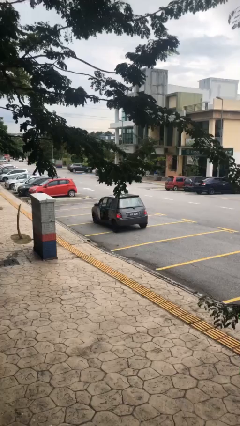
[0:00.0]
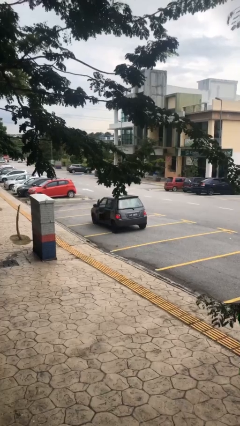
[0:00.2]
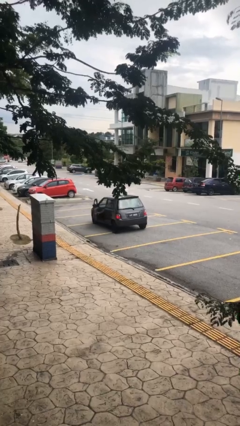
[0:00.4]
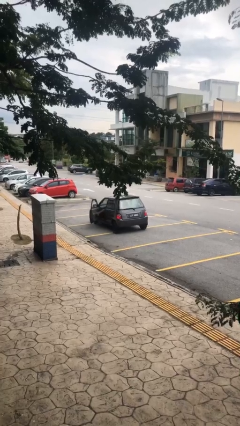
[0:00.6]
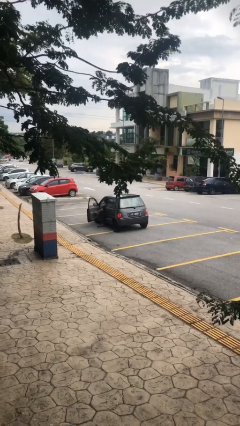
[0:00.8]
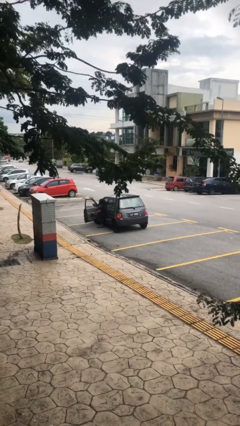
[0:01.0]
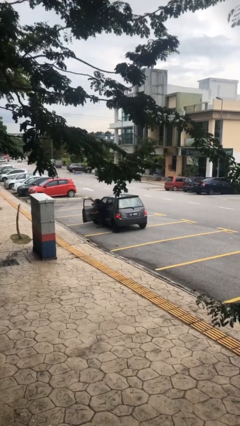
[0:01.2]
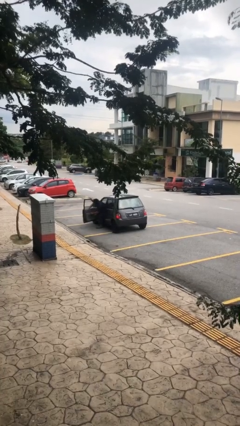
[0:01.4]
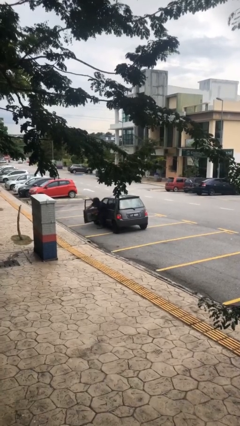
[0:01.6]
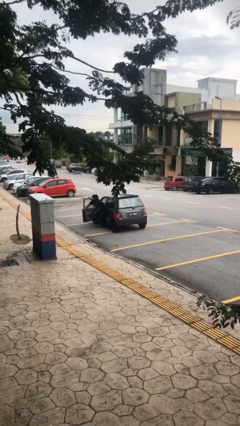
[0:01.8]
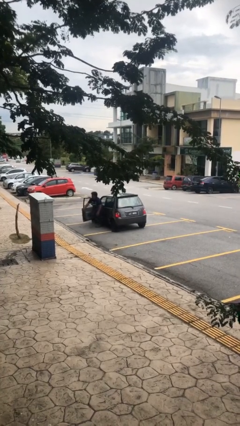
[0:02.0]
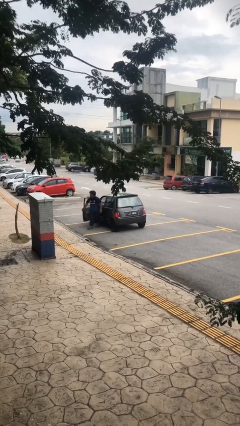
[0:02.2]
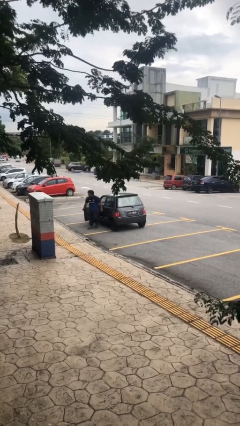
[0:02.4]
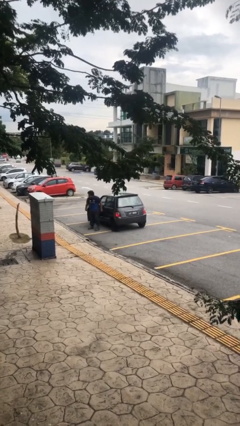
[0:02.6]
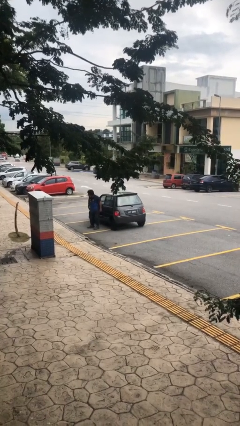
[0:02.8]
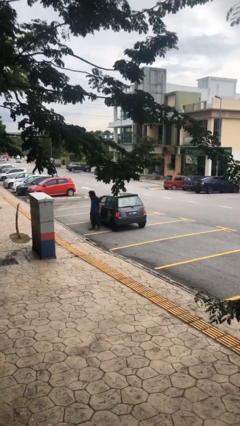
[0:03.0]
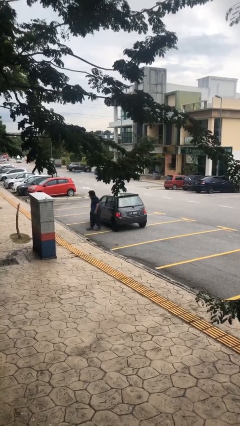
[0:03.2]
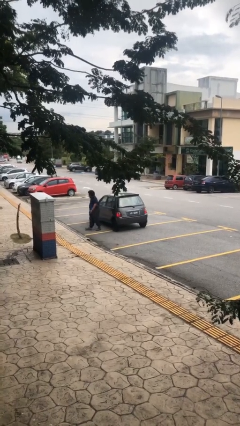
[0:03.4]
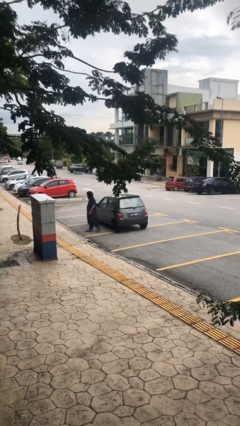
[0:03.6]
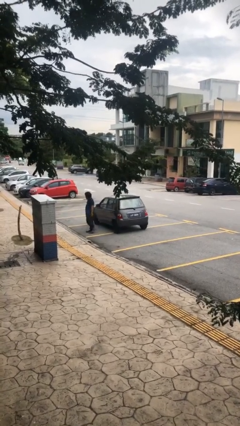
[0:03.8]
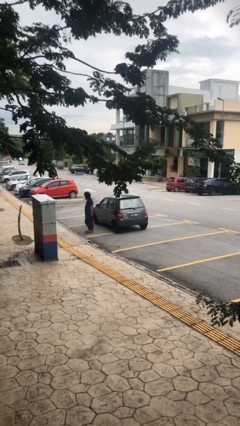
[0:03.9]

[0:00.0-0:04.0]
car drops off person

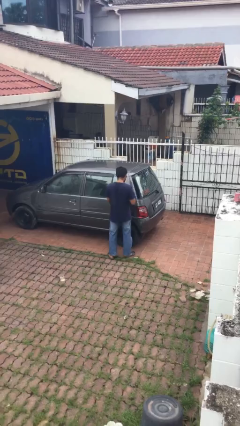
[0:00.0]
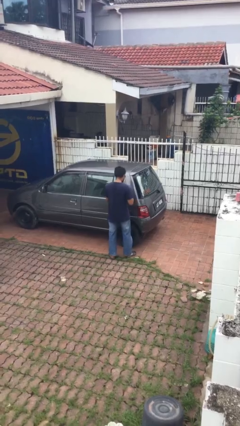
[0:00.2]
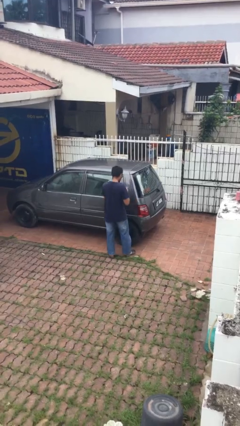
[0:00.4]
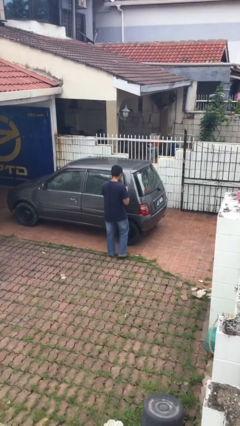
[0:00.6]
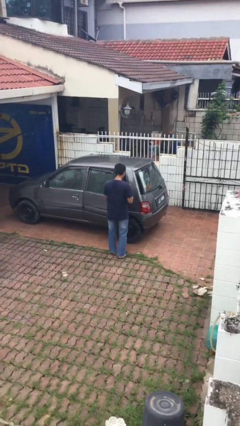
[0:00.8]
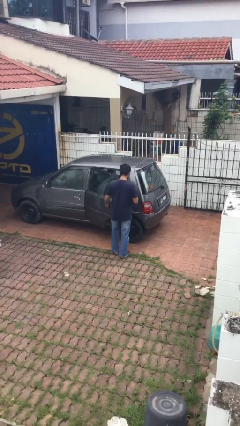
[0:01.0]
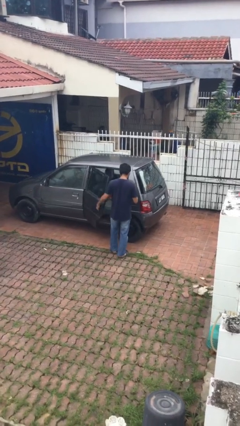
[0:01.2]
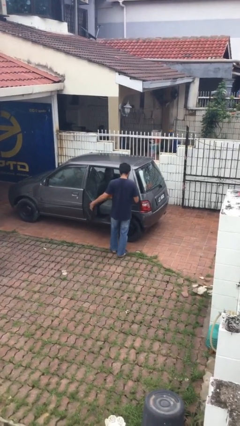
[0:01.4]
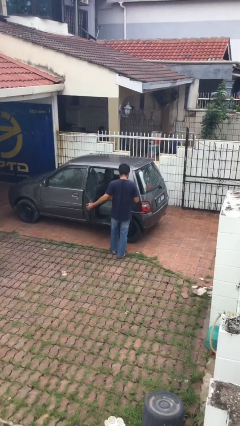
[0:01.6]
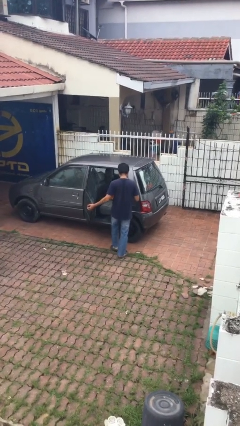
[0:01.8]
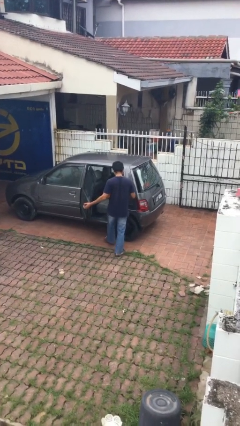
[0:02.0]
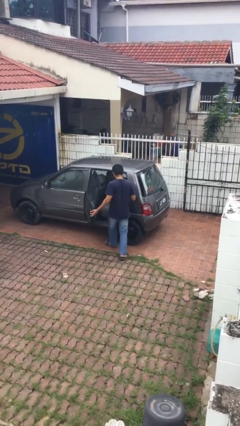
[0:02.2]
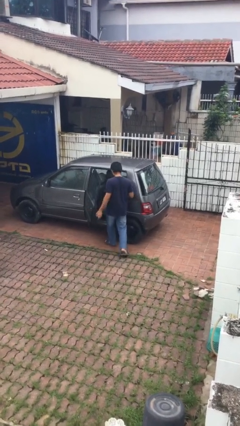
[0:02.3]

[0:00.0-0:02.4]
person opens car door

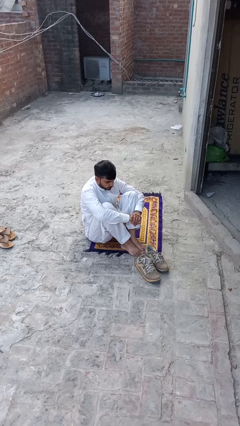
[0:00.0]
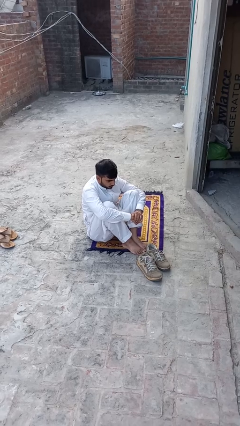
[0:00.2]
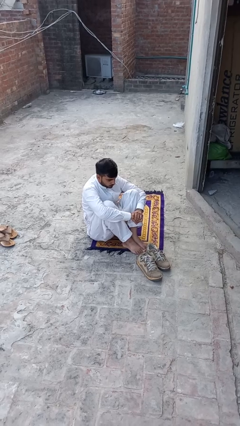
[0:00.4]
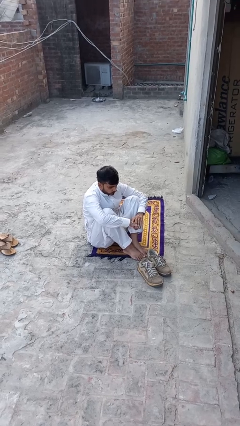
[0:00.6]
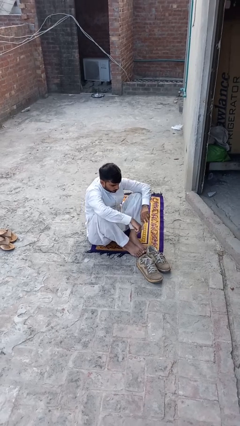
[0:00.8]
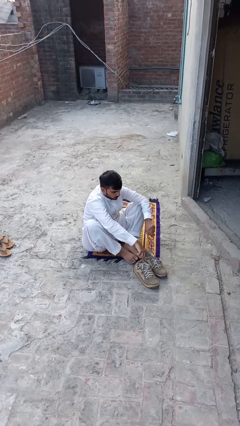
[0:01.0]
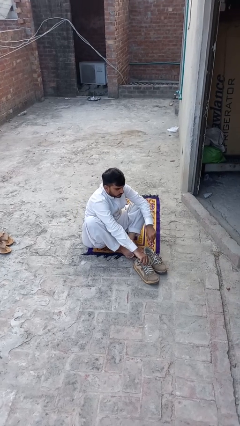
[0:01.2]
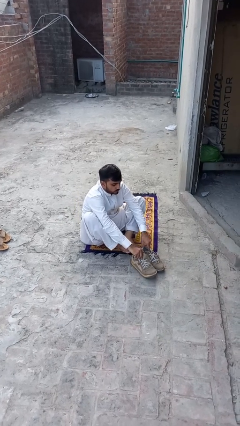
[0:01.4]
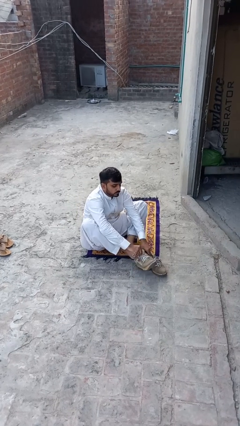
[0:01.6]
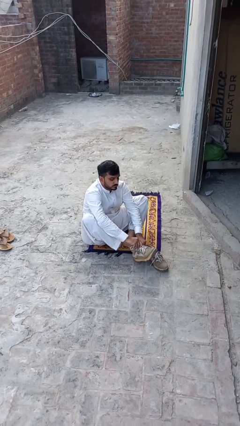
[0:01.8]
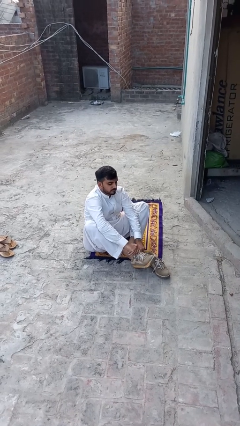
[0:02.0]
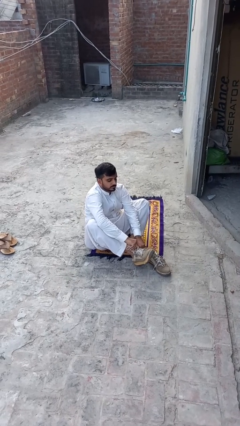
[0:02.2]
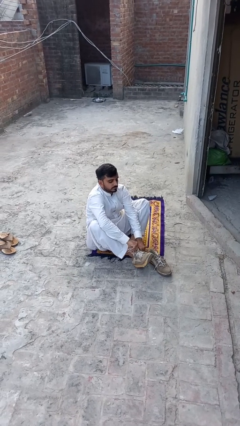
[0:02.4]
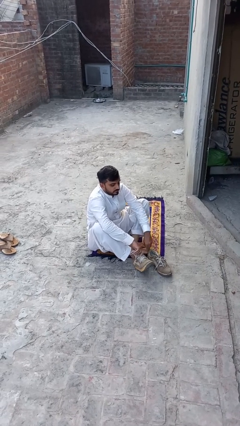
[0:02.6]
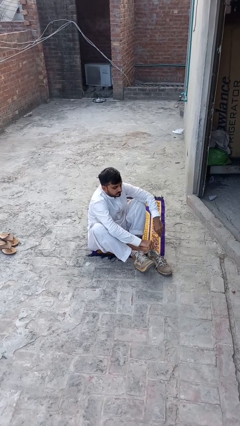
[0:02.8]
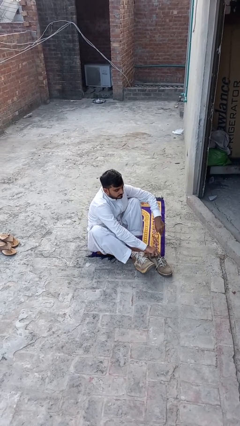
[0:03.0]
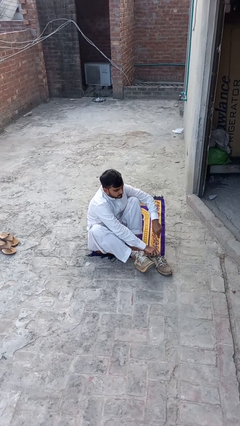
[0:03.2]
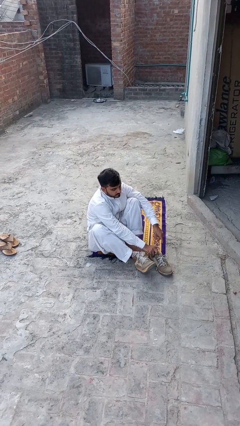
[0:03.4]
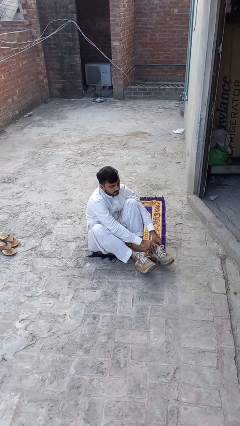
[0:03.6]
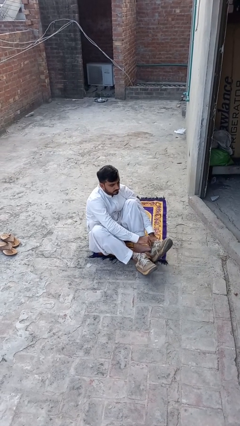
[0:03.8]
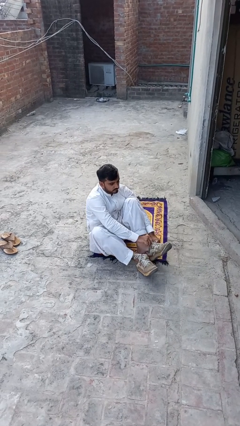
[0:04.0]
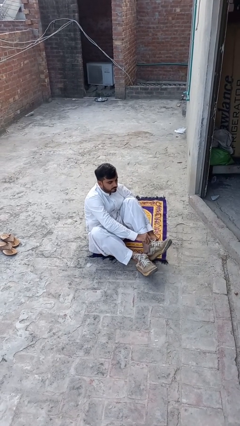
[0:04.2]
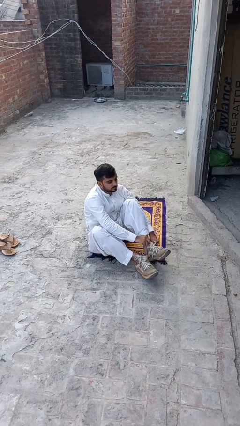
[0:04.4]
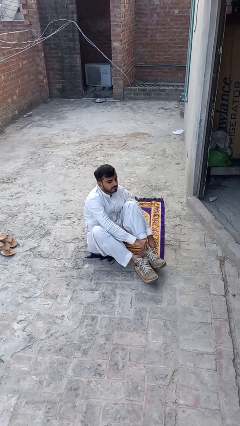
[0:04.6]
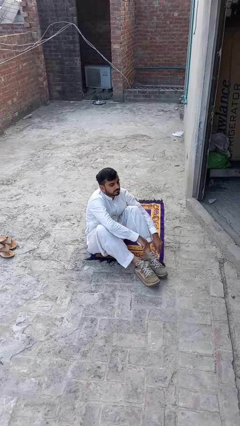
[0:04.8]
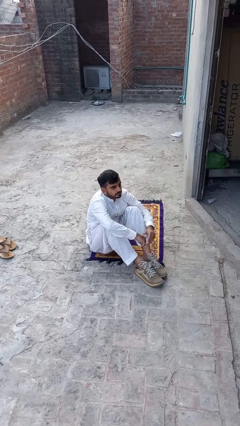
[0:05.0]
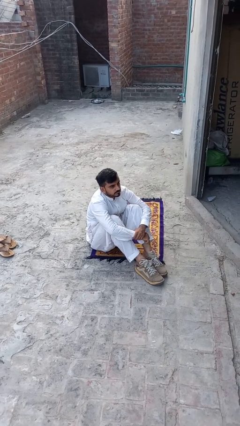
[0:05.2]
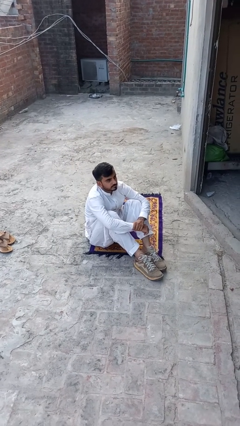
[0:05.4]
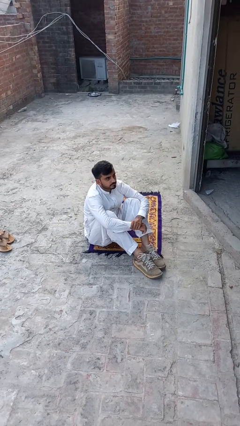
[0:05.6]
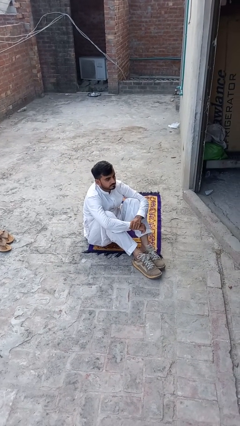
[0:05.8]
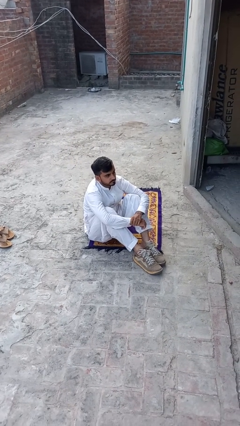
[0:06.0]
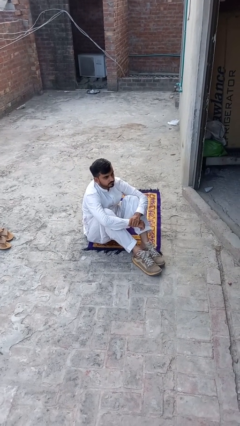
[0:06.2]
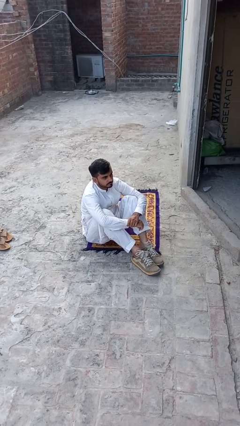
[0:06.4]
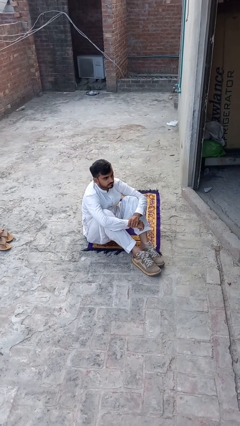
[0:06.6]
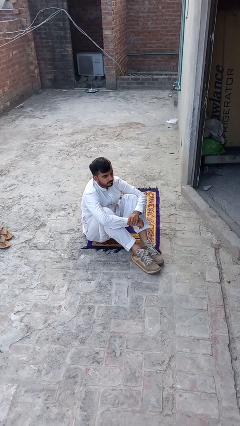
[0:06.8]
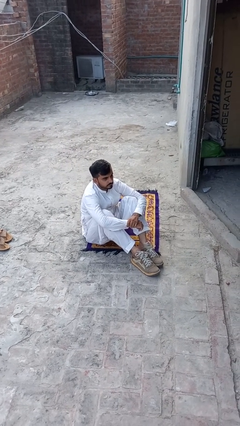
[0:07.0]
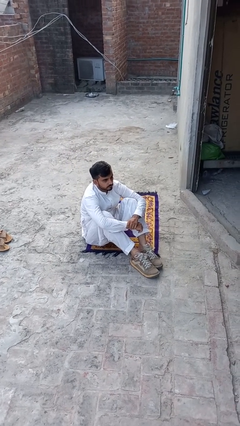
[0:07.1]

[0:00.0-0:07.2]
person puts on shoes

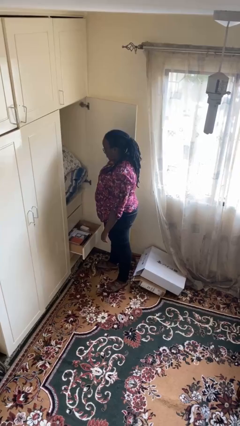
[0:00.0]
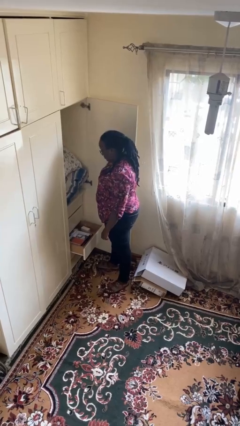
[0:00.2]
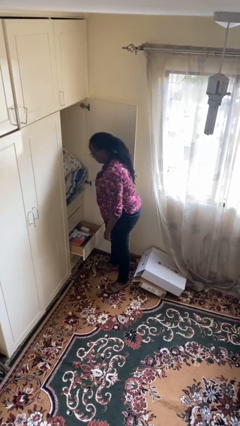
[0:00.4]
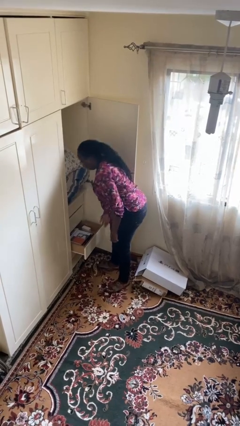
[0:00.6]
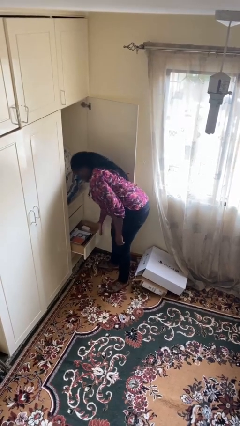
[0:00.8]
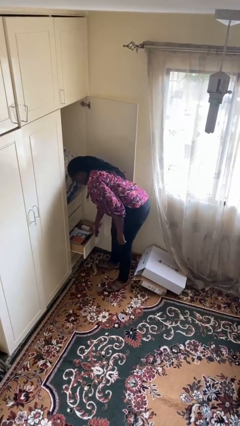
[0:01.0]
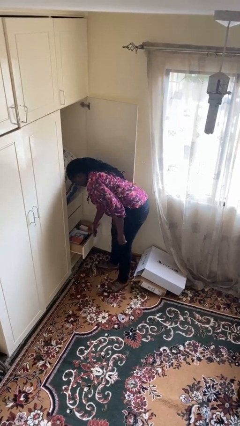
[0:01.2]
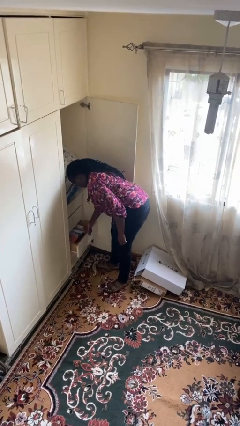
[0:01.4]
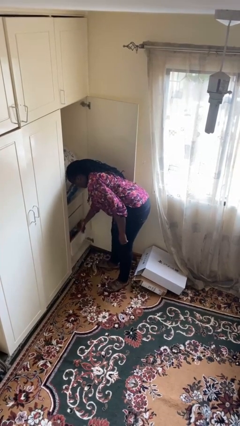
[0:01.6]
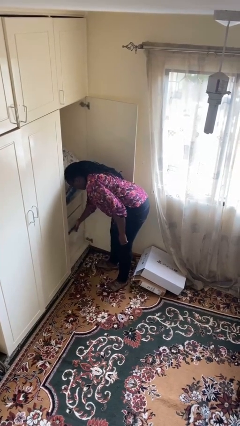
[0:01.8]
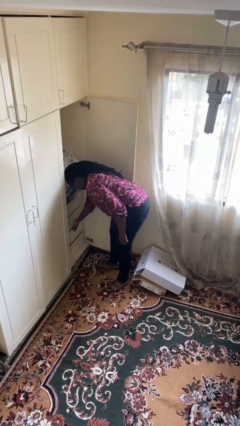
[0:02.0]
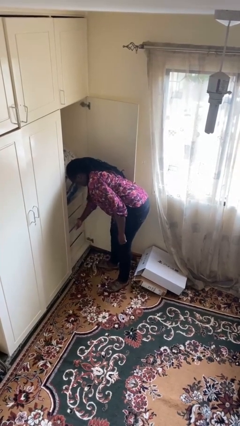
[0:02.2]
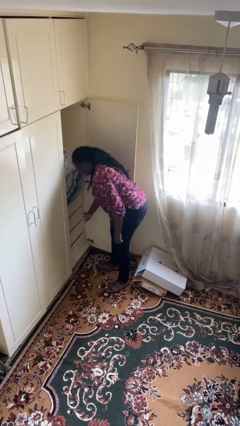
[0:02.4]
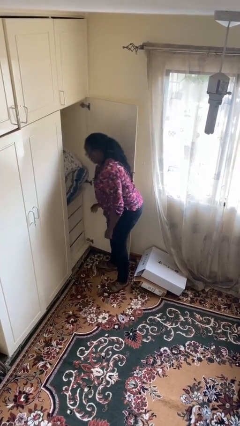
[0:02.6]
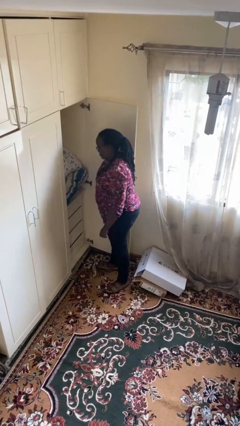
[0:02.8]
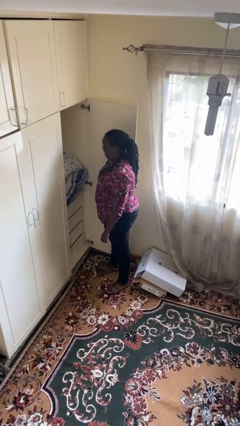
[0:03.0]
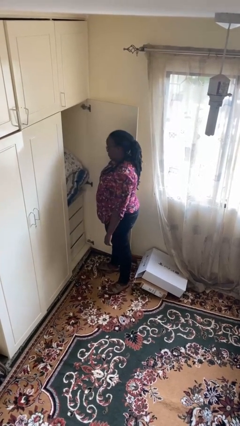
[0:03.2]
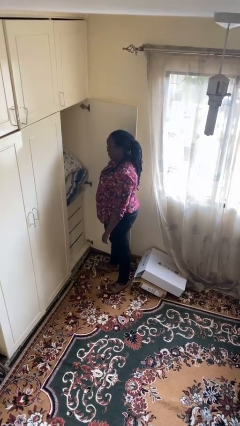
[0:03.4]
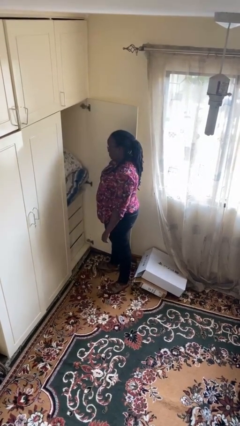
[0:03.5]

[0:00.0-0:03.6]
person closes dresser drawer

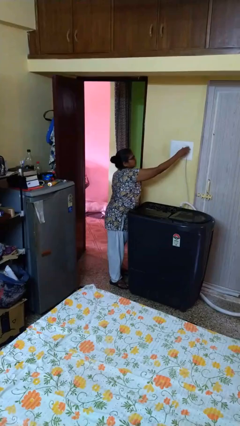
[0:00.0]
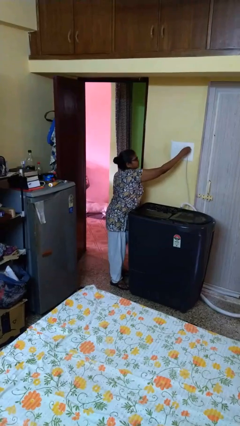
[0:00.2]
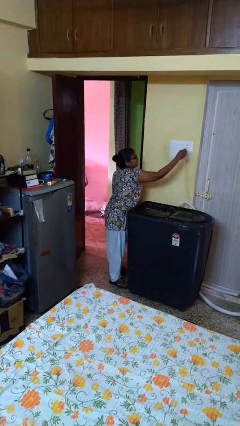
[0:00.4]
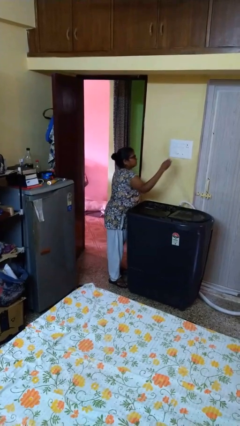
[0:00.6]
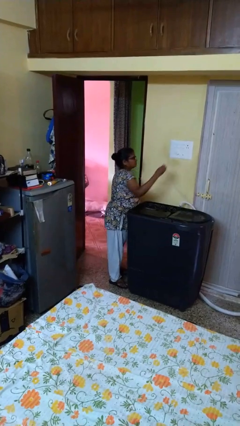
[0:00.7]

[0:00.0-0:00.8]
person unplugs from electrical socket
